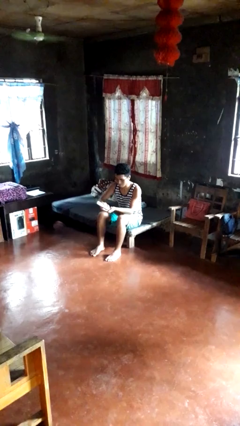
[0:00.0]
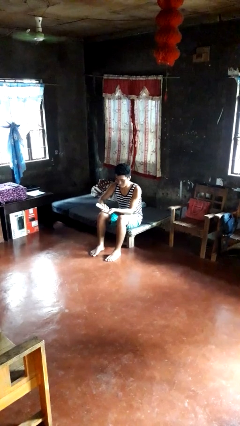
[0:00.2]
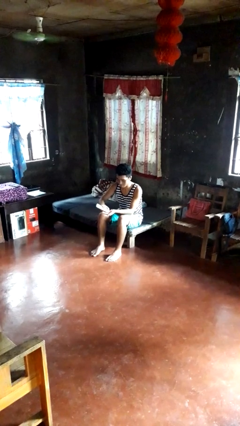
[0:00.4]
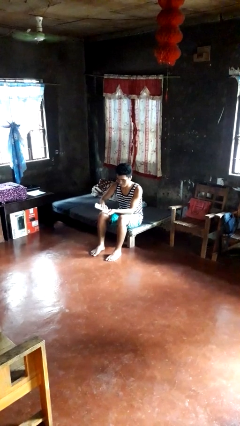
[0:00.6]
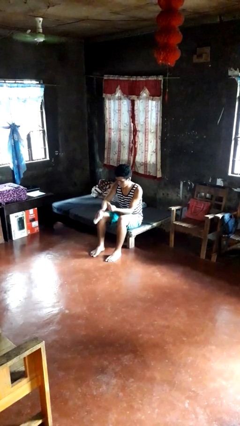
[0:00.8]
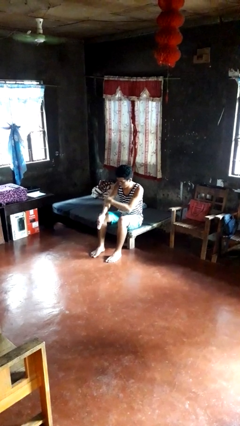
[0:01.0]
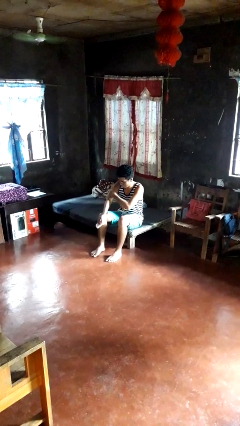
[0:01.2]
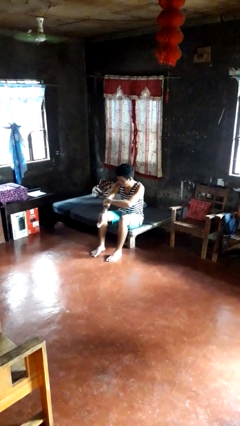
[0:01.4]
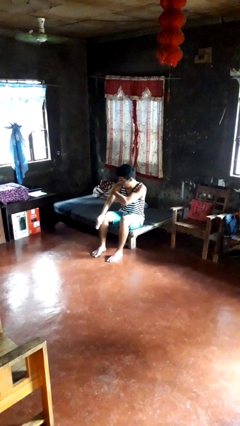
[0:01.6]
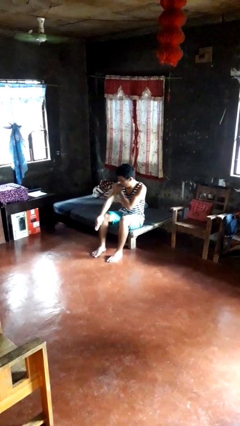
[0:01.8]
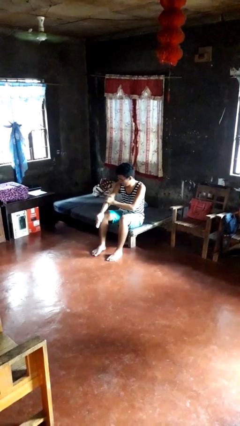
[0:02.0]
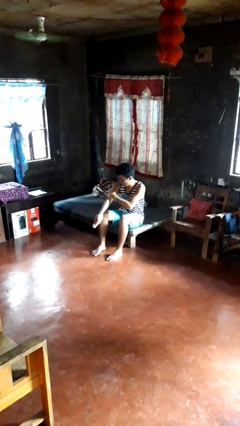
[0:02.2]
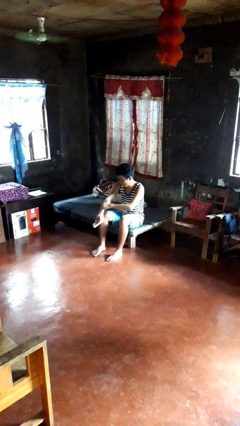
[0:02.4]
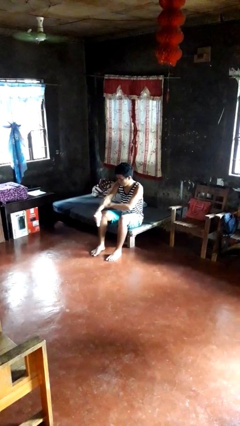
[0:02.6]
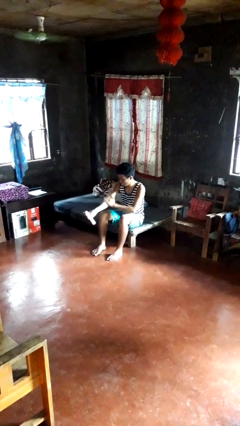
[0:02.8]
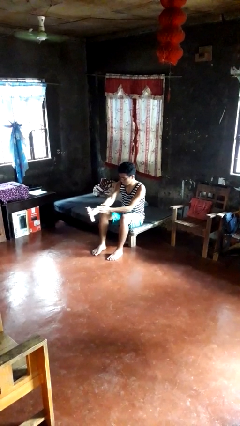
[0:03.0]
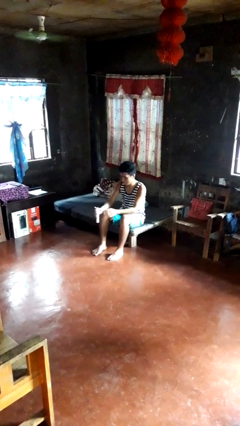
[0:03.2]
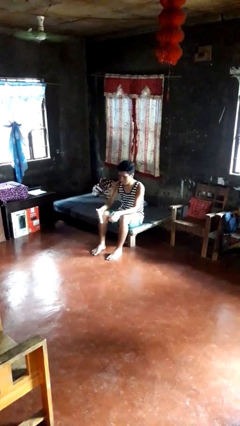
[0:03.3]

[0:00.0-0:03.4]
person applies sunscreen

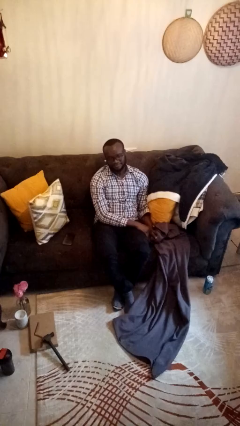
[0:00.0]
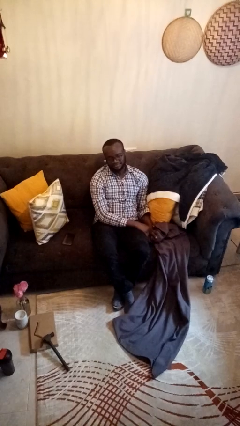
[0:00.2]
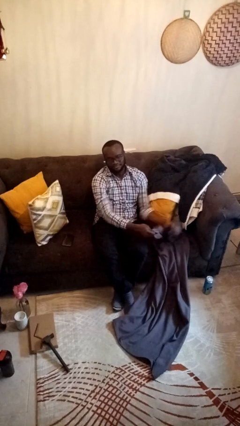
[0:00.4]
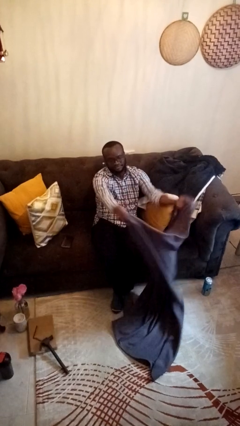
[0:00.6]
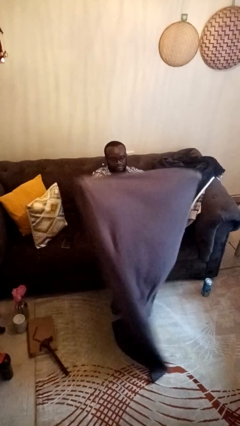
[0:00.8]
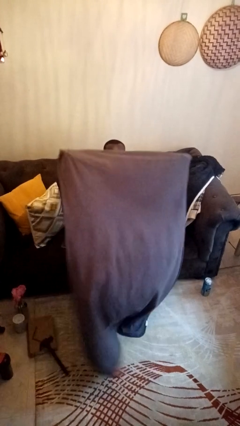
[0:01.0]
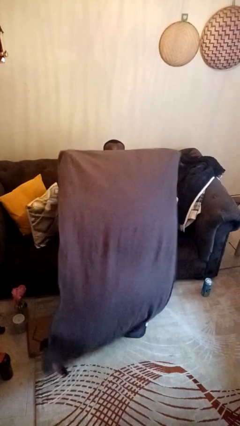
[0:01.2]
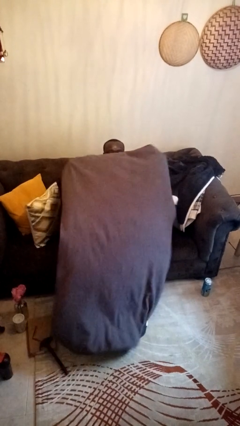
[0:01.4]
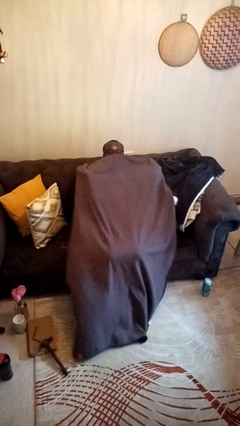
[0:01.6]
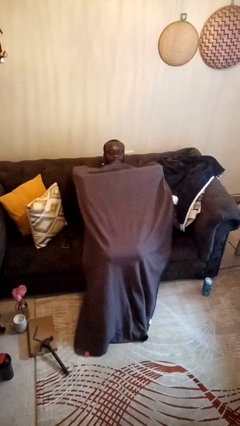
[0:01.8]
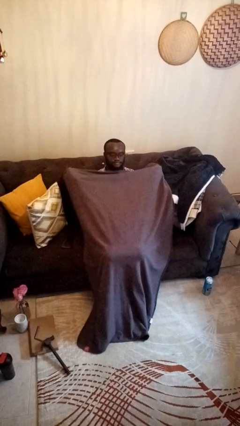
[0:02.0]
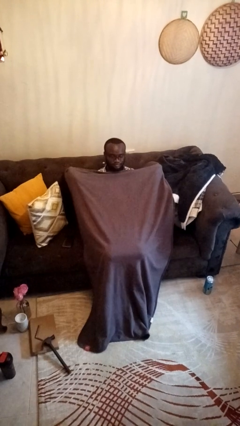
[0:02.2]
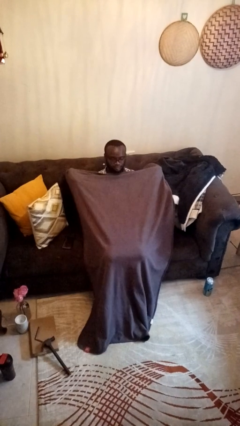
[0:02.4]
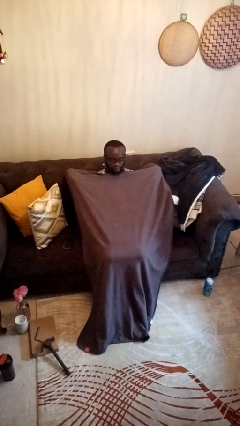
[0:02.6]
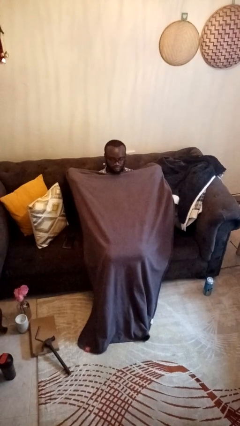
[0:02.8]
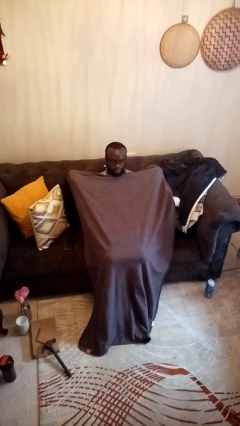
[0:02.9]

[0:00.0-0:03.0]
person covers with blanket

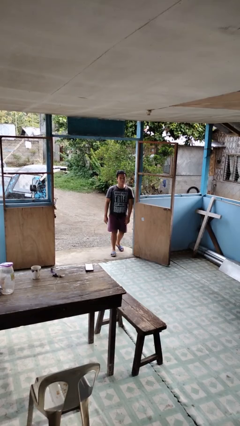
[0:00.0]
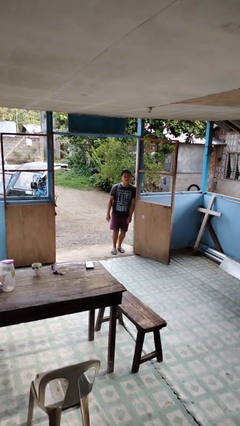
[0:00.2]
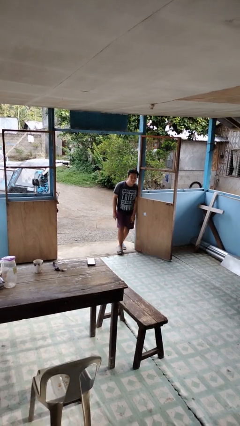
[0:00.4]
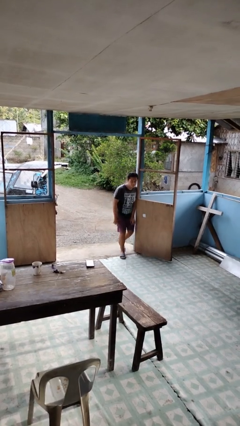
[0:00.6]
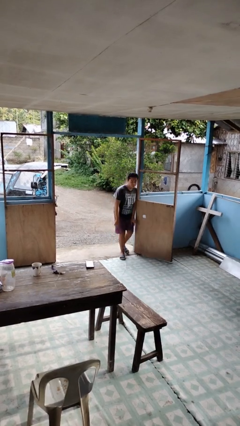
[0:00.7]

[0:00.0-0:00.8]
person bumps into wall

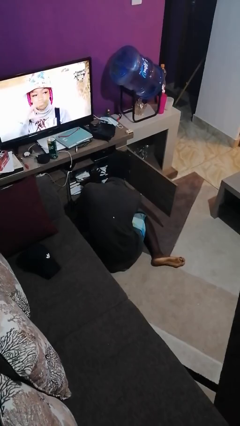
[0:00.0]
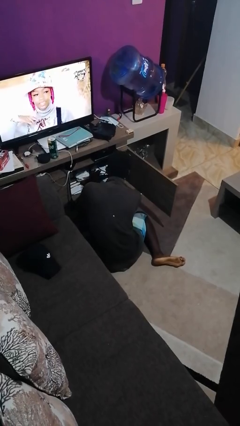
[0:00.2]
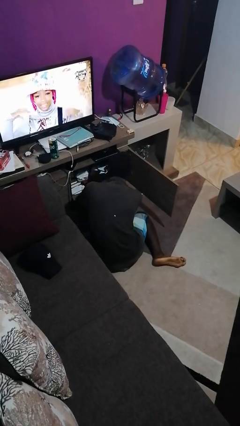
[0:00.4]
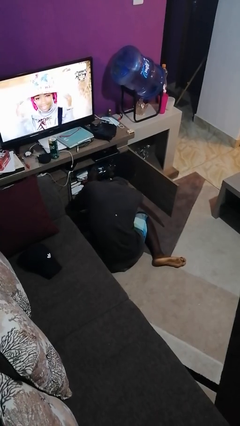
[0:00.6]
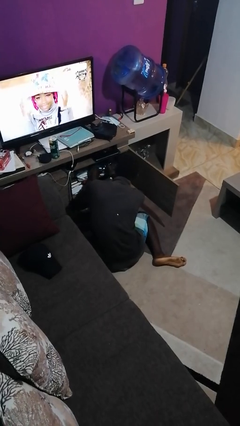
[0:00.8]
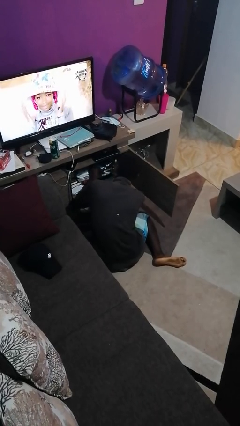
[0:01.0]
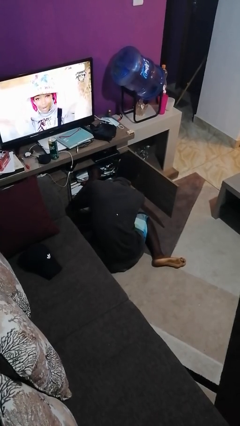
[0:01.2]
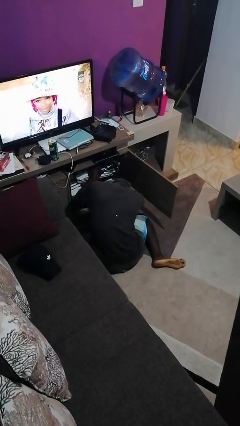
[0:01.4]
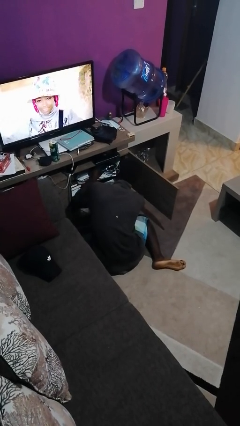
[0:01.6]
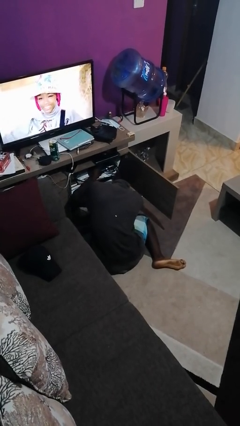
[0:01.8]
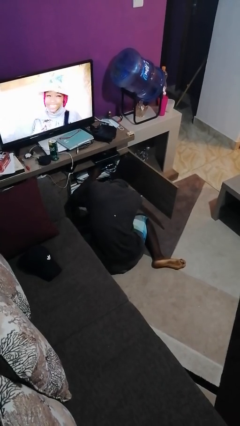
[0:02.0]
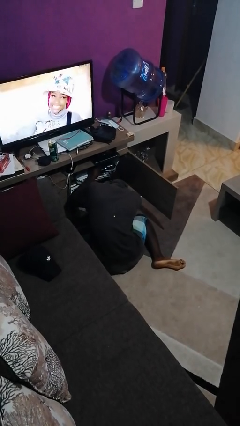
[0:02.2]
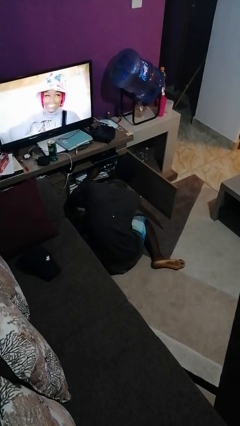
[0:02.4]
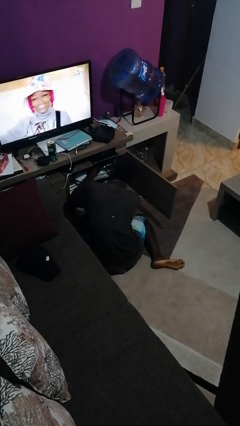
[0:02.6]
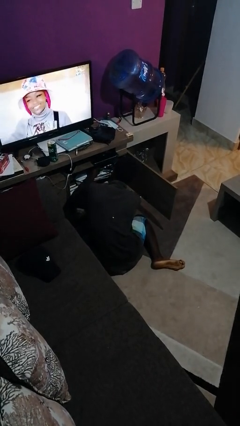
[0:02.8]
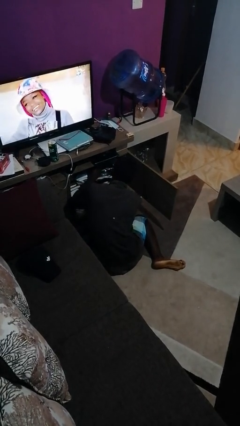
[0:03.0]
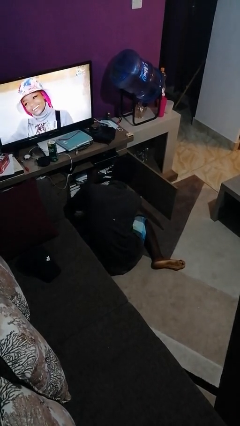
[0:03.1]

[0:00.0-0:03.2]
person searches in cabinet

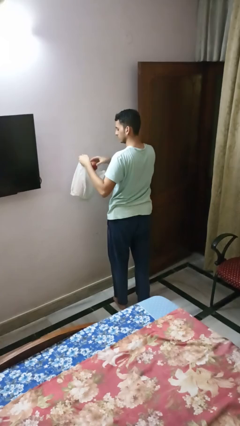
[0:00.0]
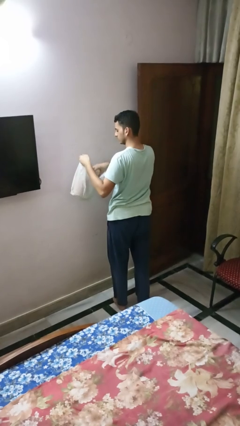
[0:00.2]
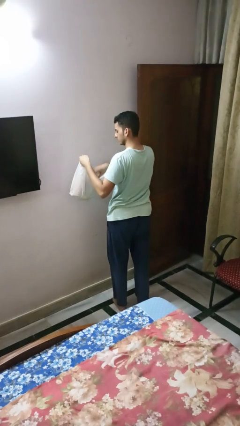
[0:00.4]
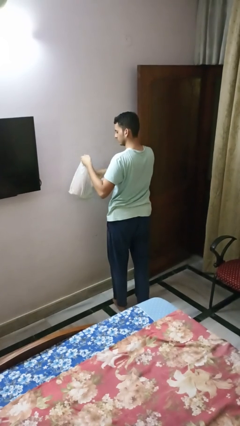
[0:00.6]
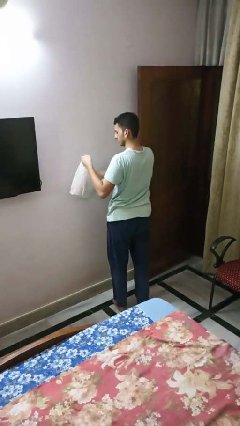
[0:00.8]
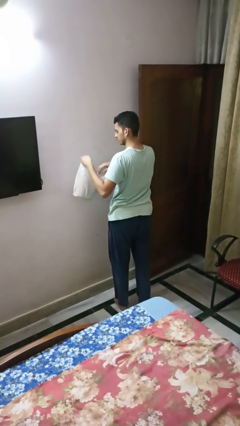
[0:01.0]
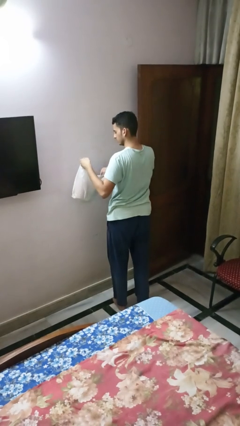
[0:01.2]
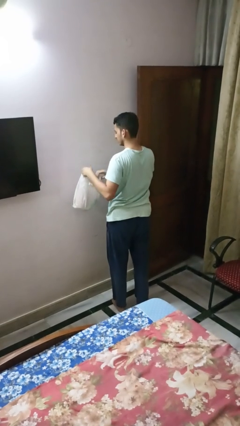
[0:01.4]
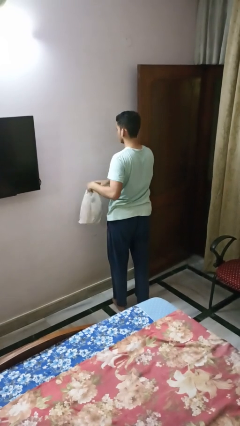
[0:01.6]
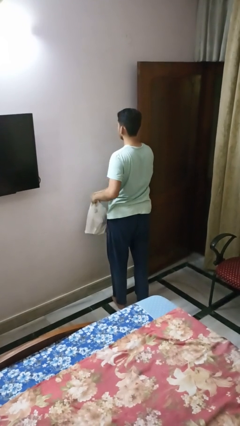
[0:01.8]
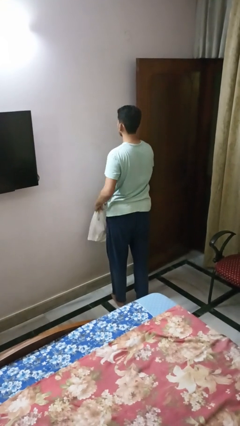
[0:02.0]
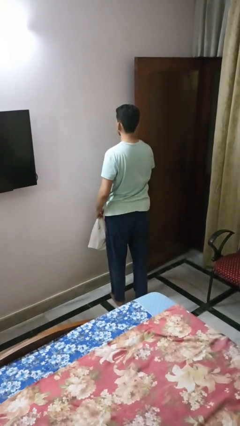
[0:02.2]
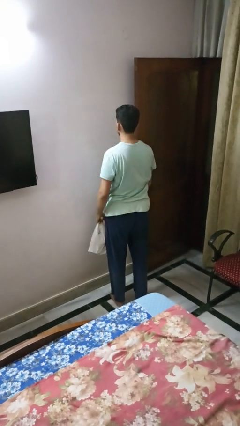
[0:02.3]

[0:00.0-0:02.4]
person puts object into bag

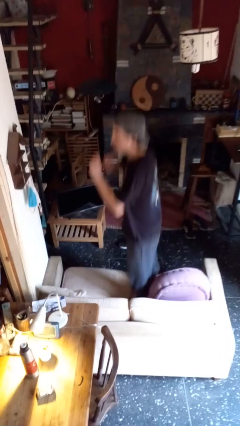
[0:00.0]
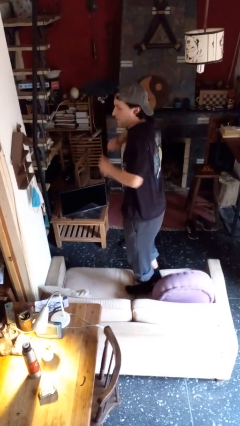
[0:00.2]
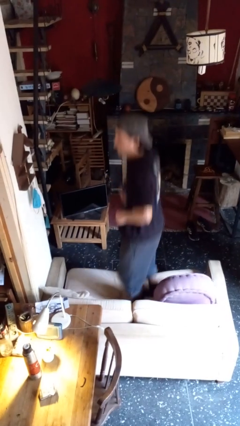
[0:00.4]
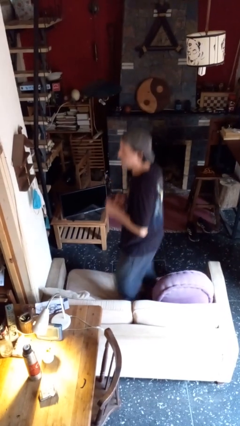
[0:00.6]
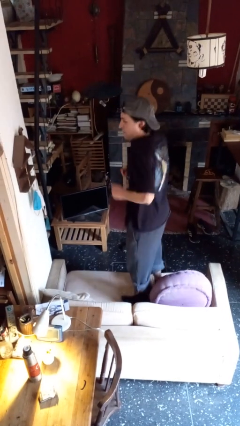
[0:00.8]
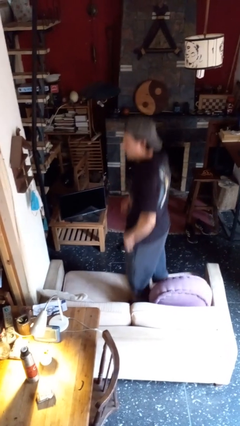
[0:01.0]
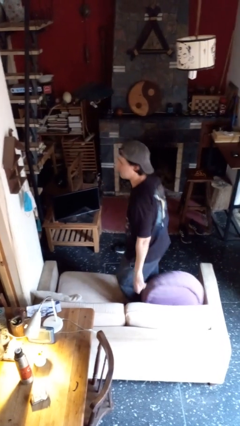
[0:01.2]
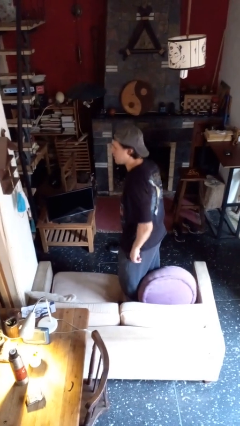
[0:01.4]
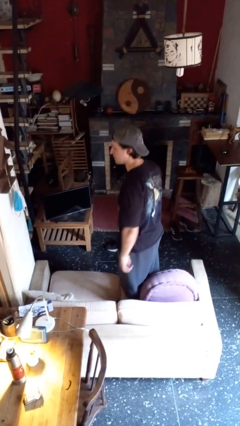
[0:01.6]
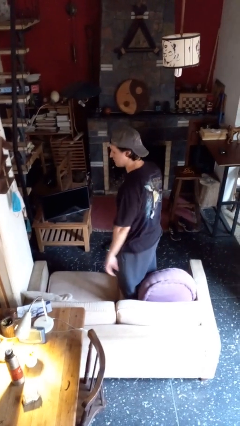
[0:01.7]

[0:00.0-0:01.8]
person jumps on couch

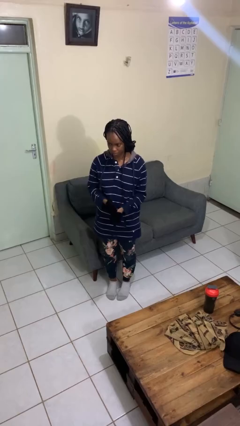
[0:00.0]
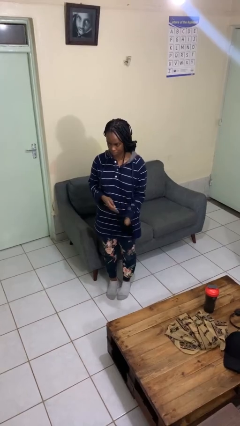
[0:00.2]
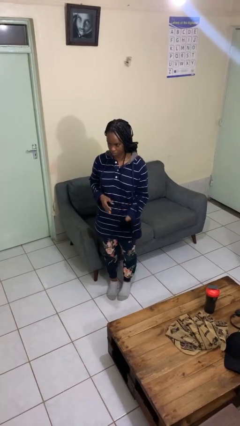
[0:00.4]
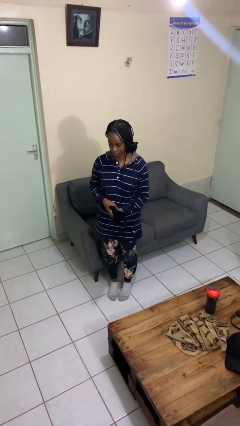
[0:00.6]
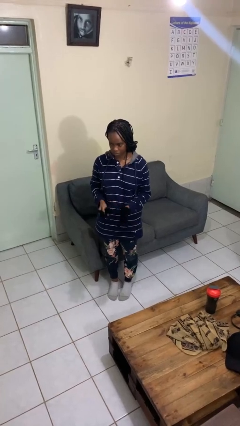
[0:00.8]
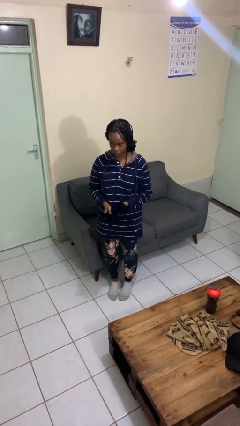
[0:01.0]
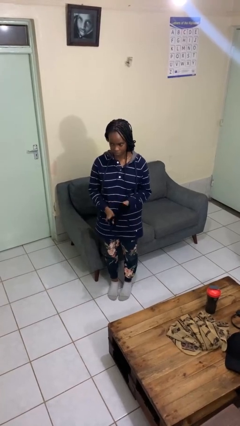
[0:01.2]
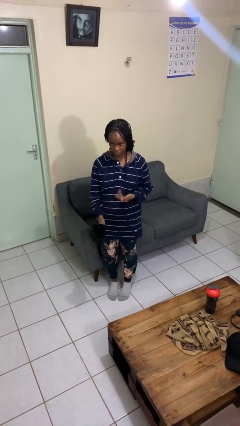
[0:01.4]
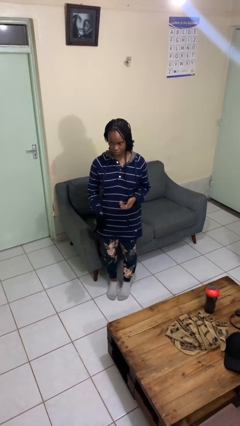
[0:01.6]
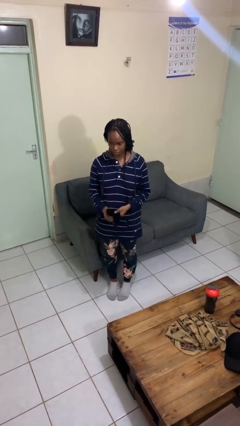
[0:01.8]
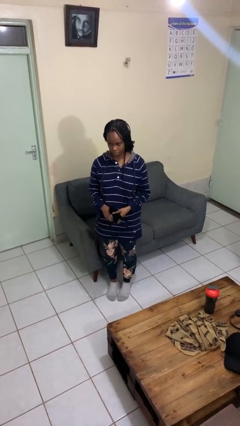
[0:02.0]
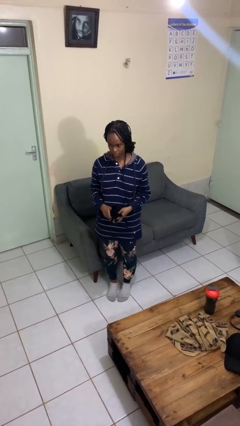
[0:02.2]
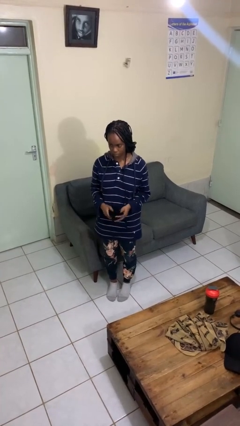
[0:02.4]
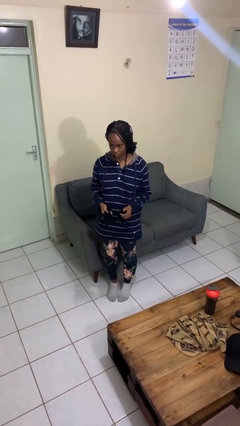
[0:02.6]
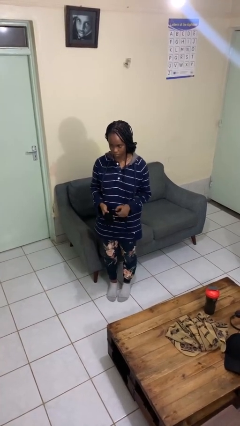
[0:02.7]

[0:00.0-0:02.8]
person takes off gloves
